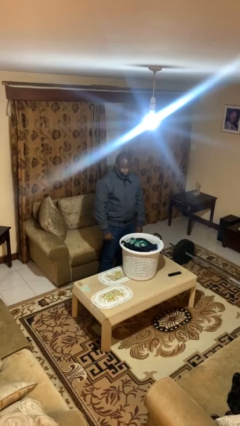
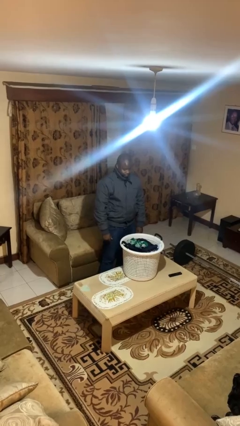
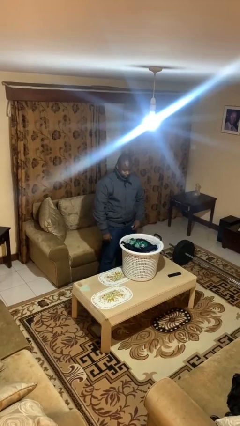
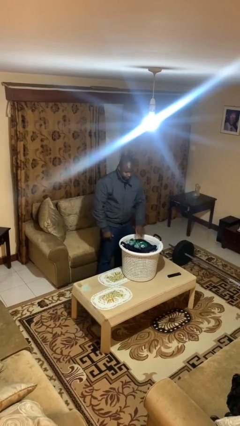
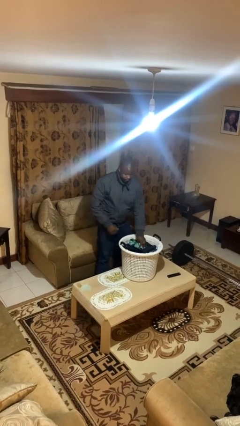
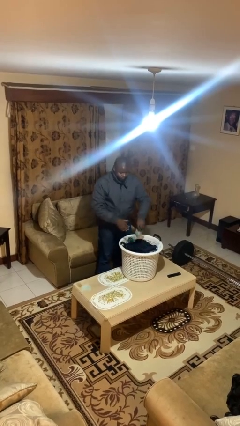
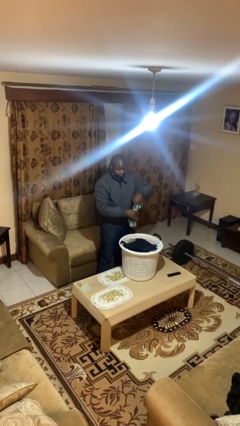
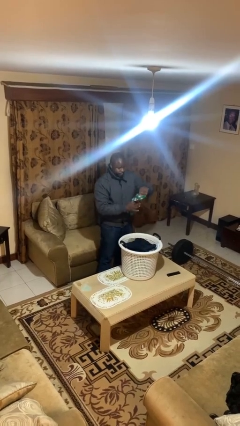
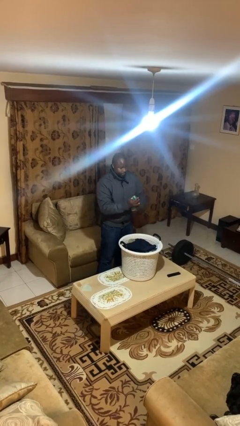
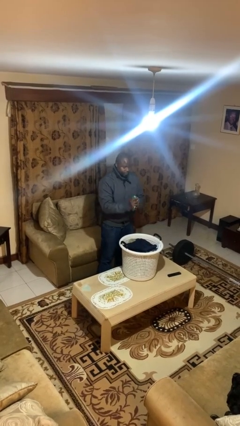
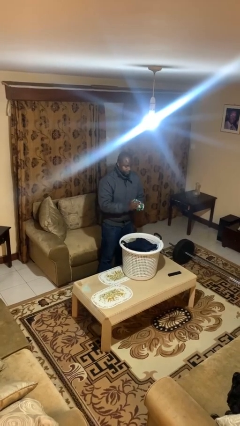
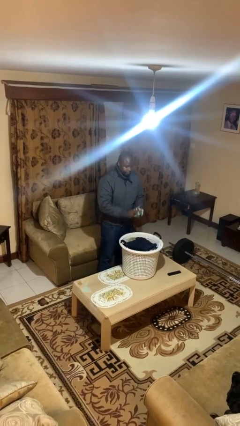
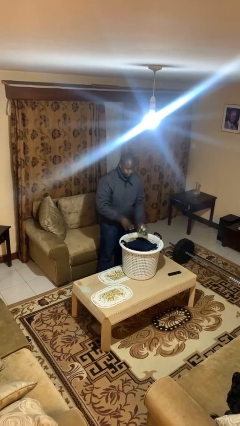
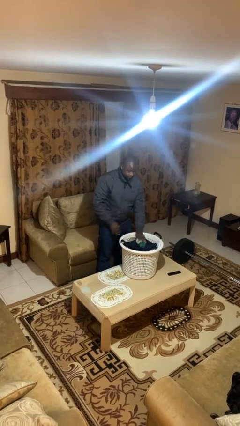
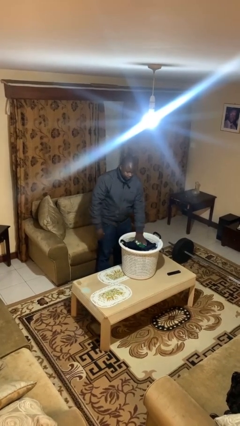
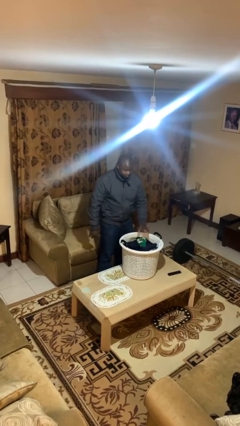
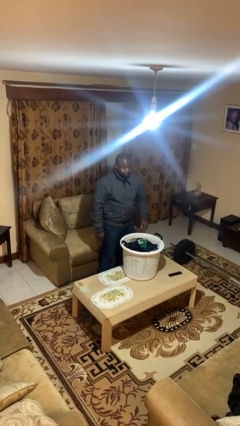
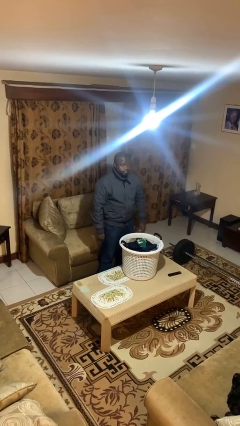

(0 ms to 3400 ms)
person folds socks

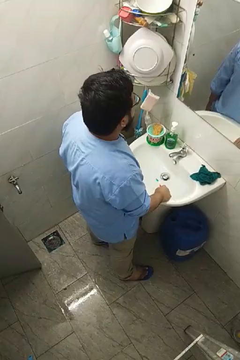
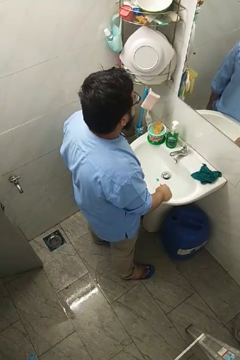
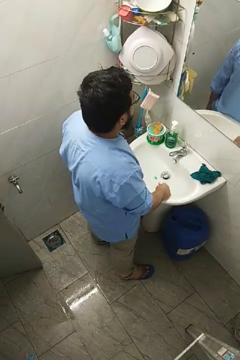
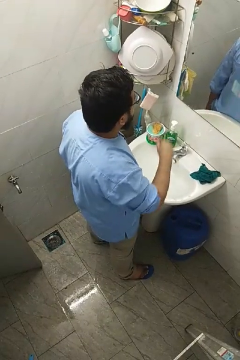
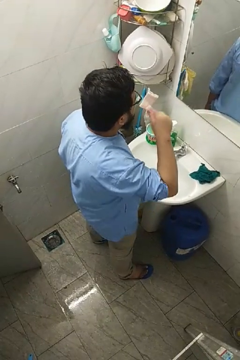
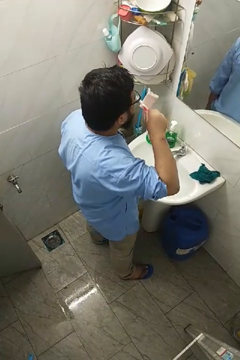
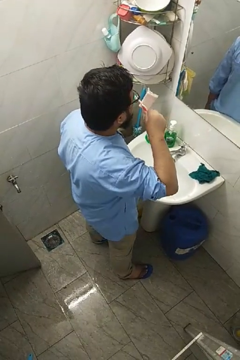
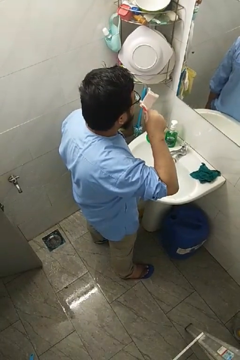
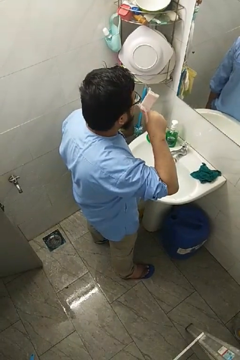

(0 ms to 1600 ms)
person brushes teeth

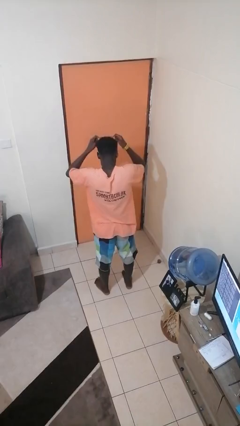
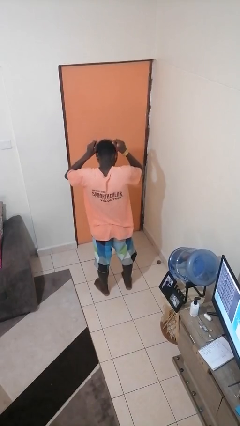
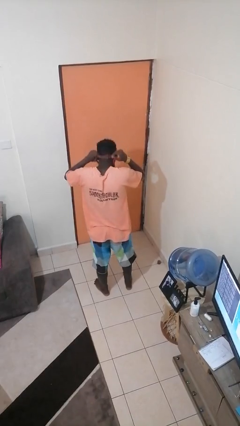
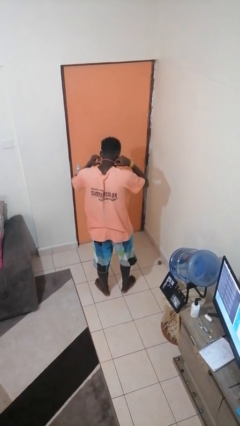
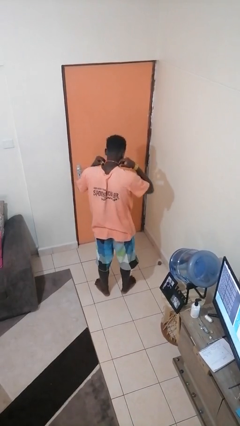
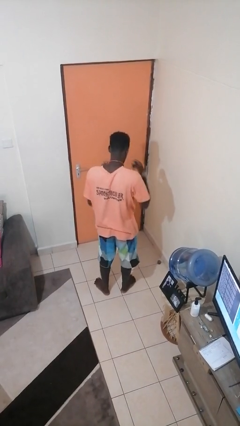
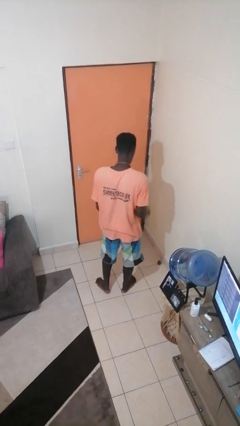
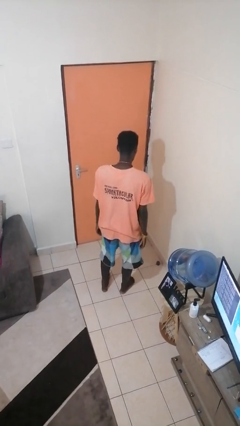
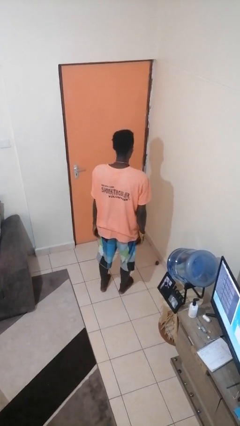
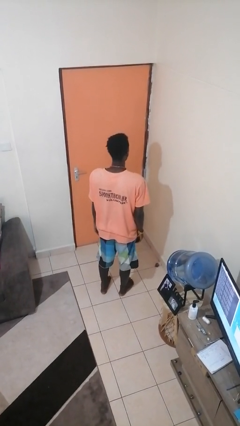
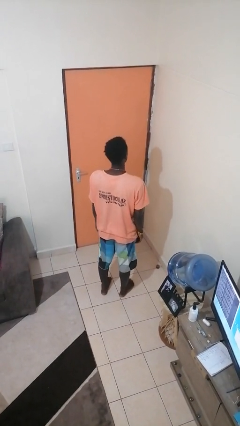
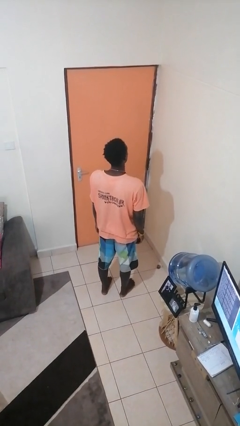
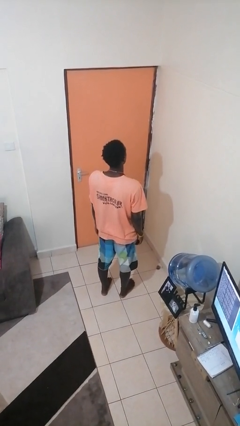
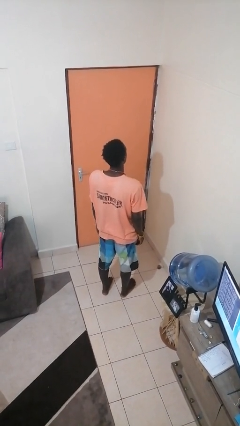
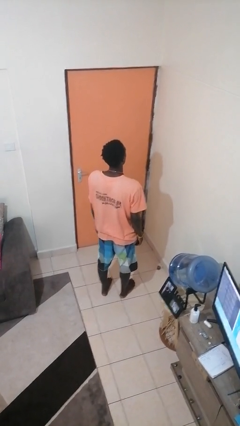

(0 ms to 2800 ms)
person puts on necklace

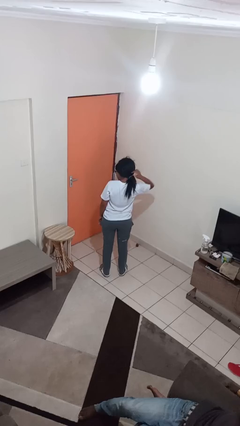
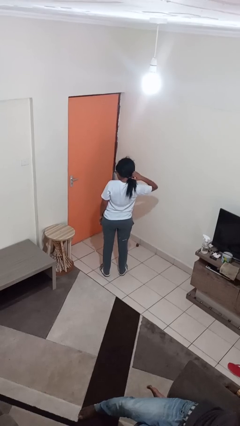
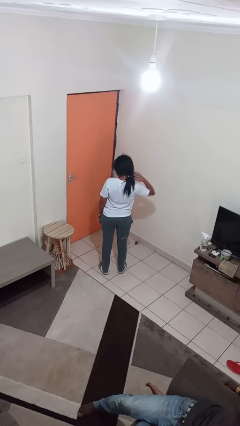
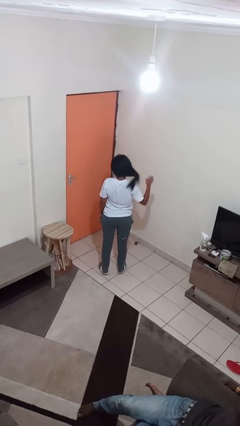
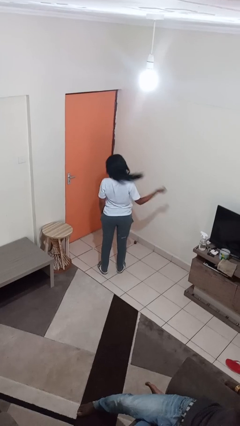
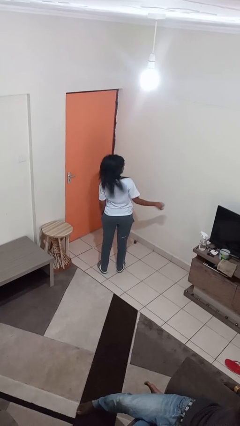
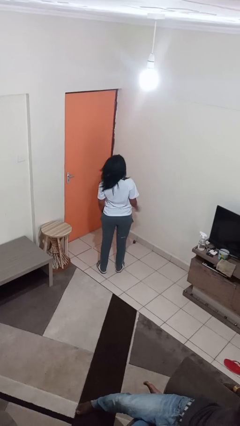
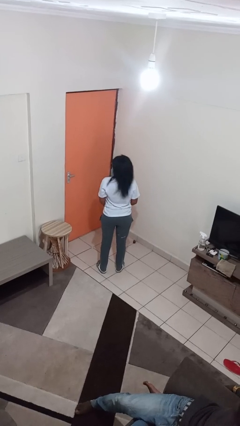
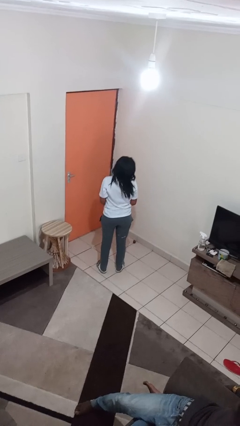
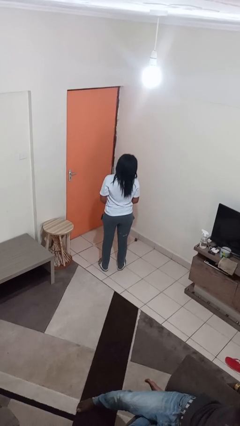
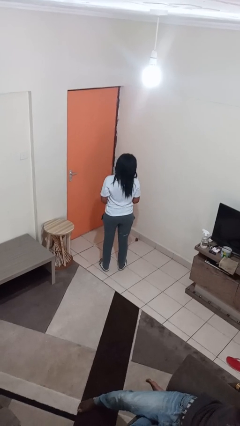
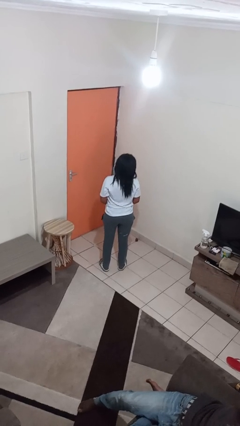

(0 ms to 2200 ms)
person takes off hairtie

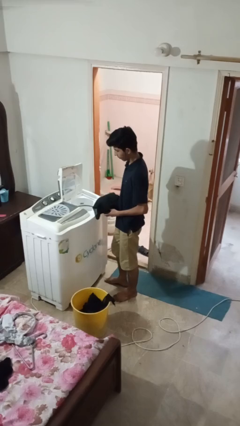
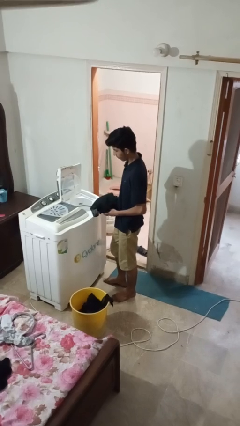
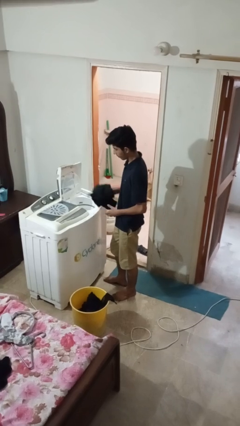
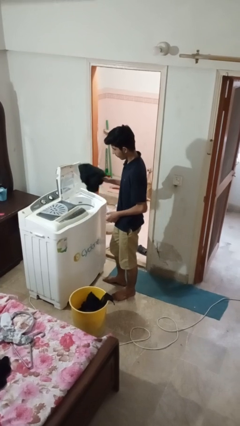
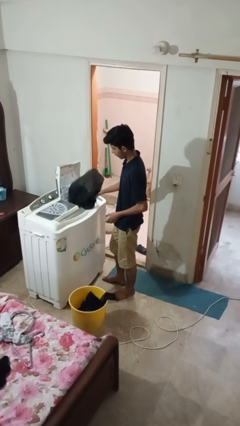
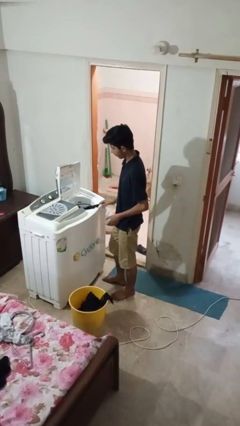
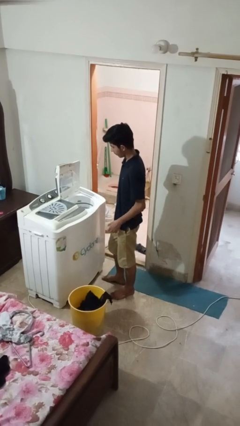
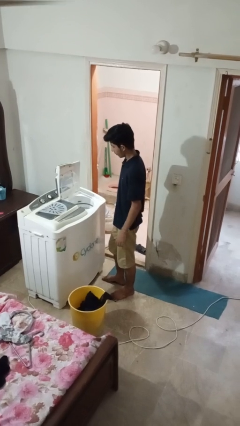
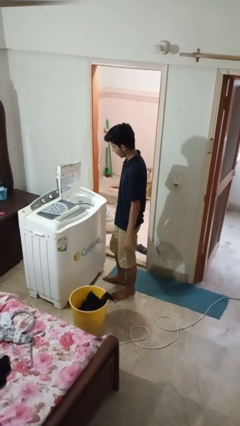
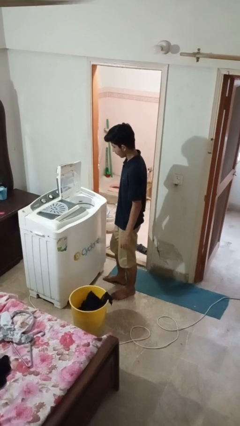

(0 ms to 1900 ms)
person loads dryer

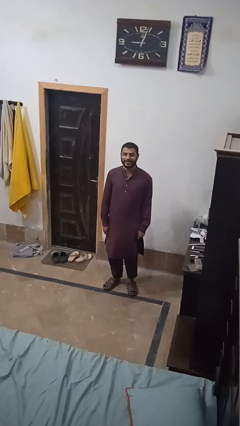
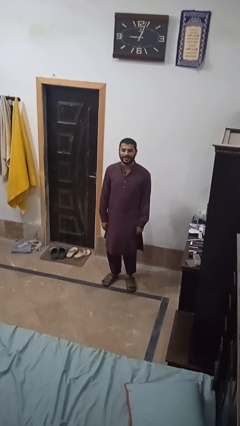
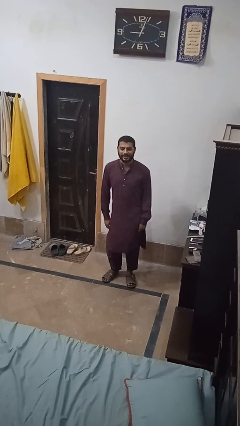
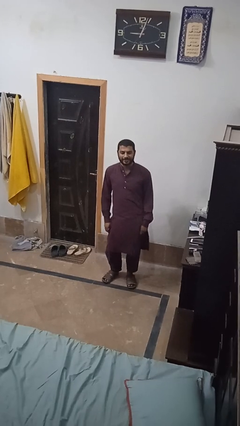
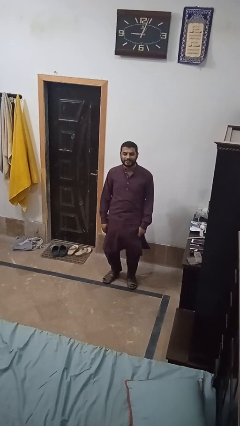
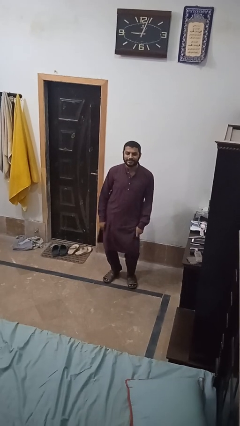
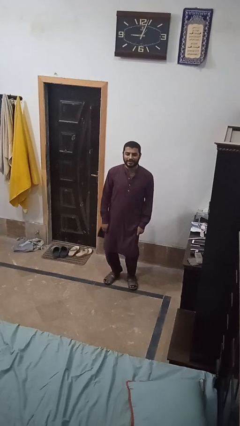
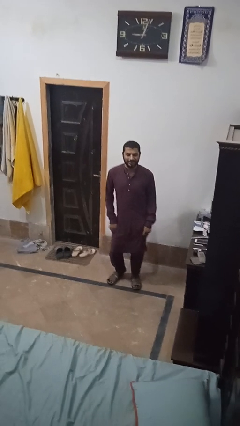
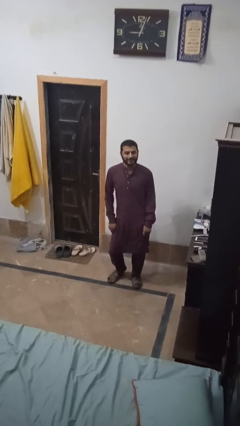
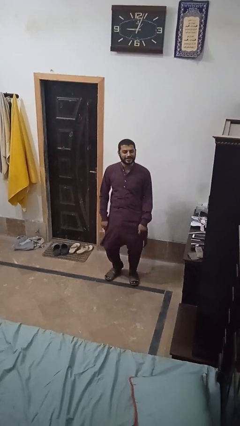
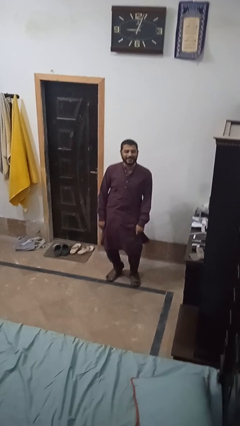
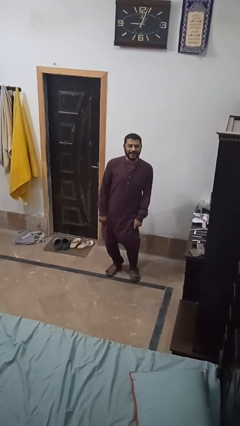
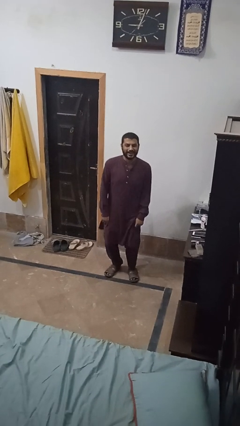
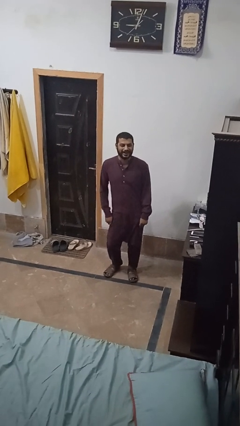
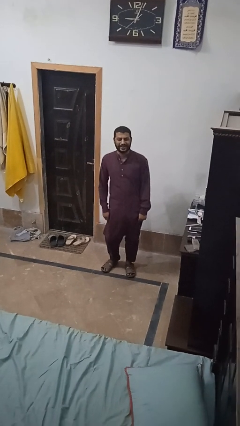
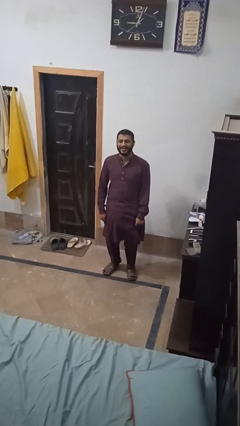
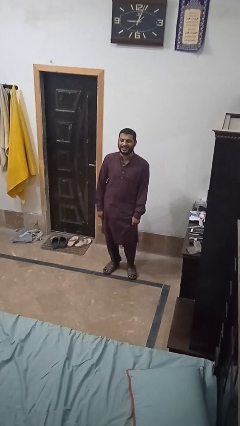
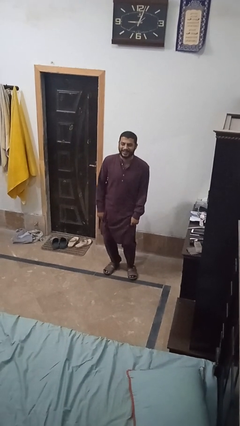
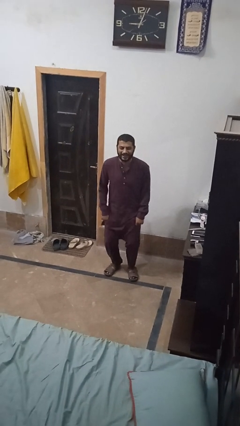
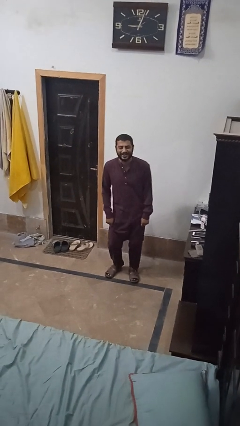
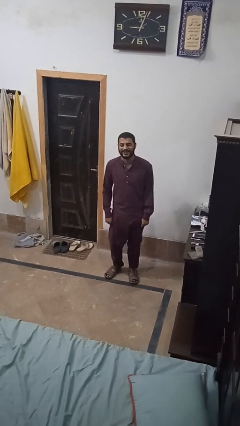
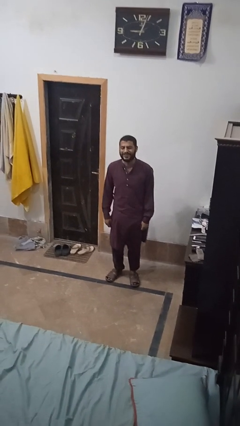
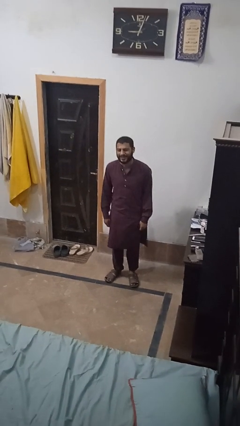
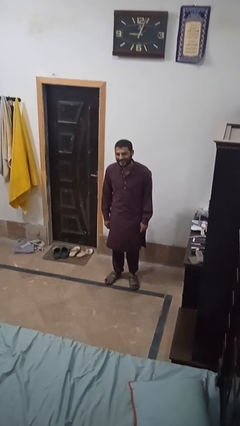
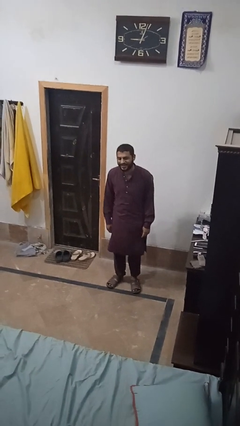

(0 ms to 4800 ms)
person wiggles hips

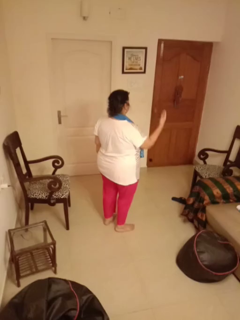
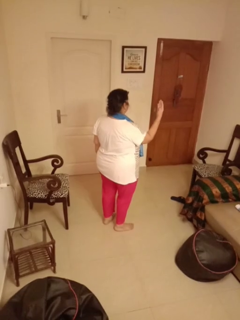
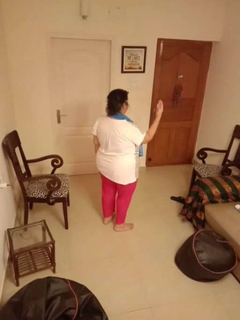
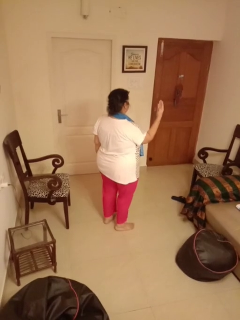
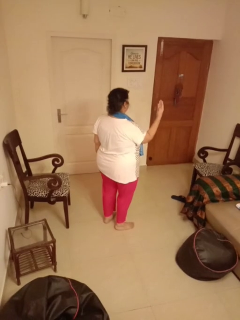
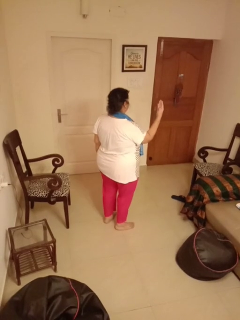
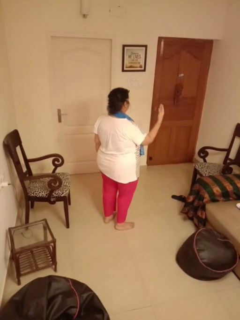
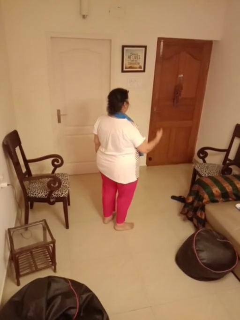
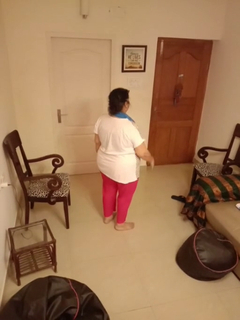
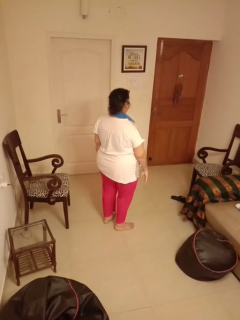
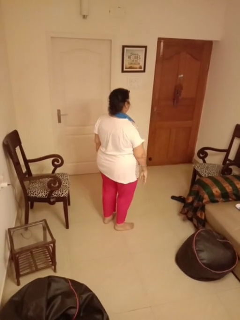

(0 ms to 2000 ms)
person gestures number four
